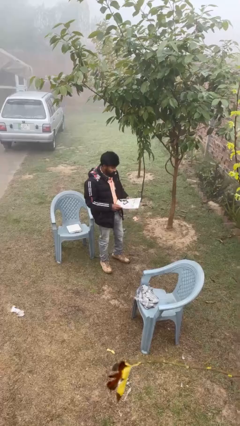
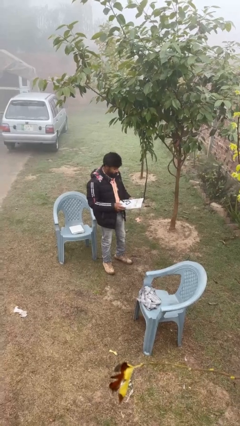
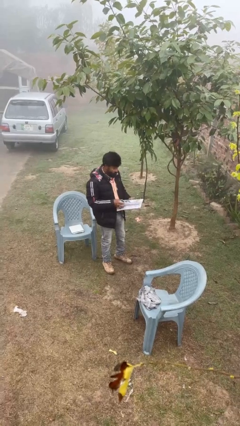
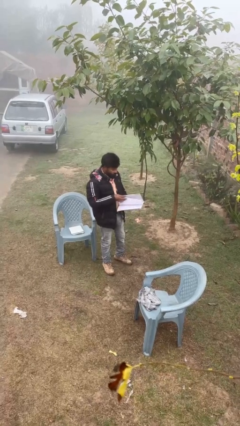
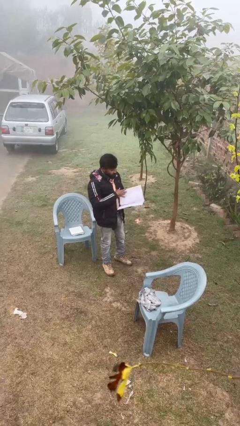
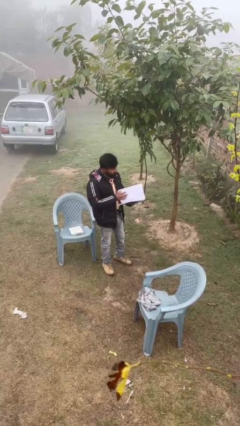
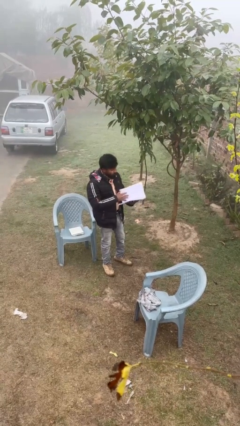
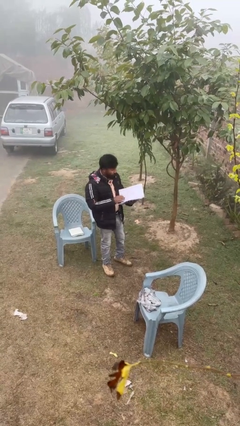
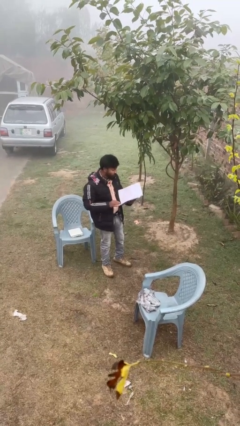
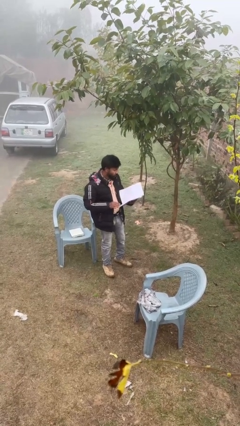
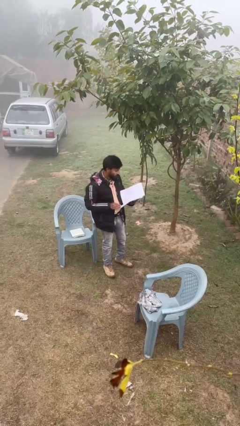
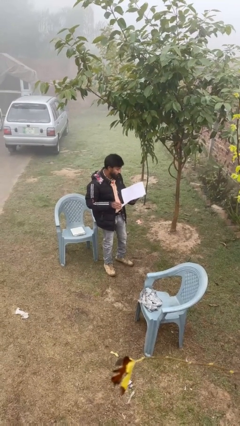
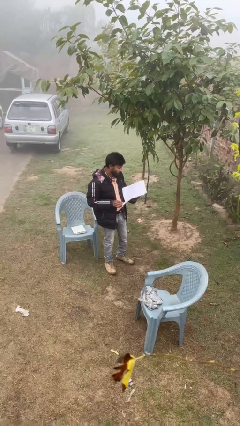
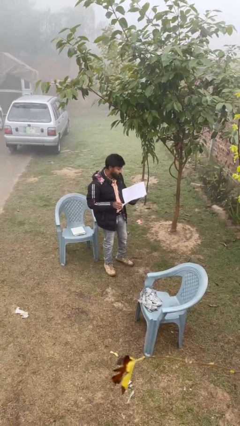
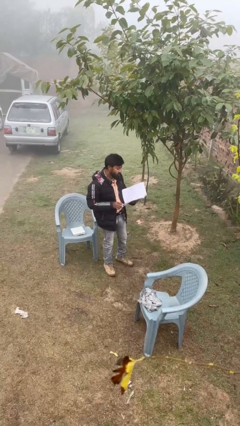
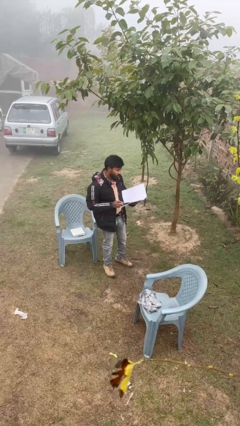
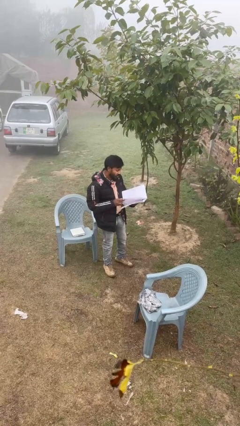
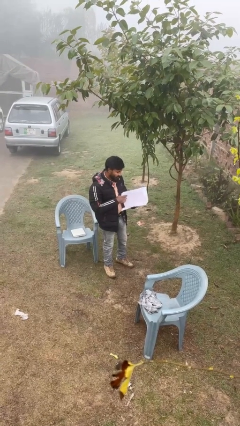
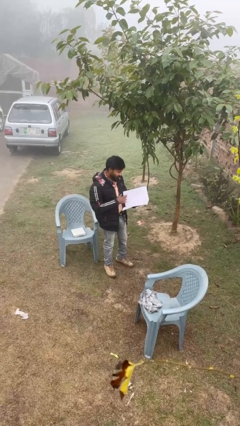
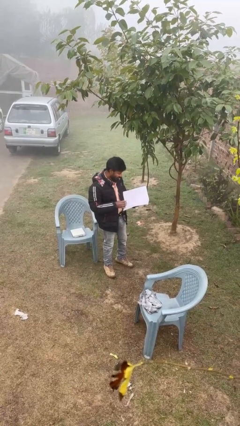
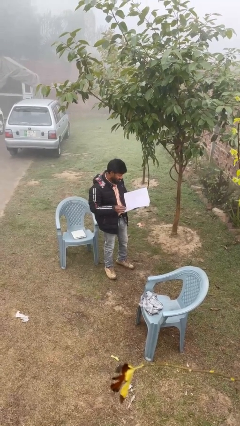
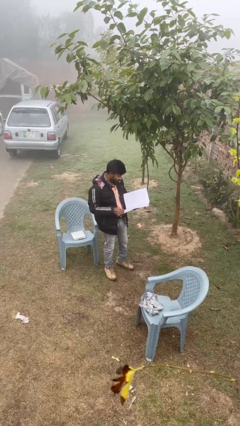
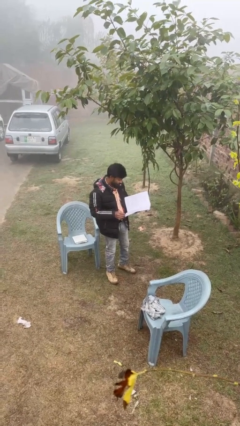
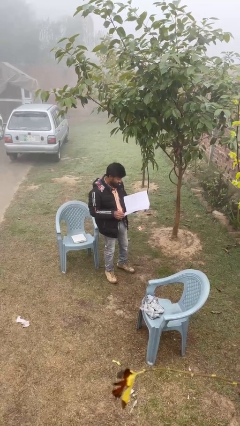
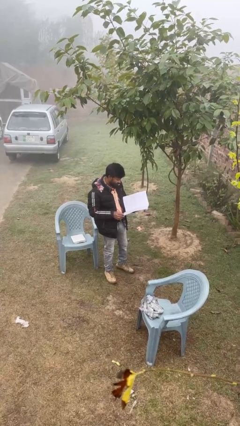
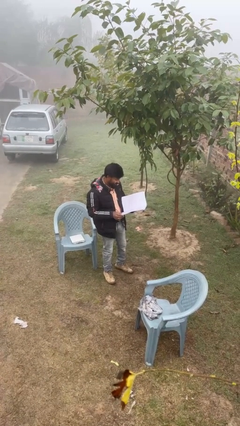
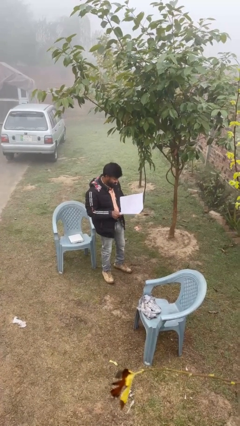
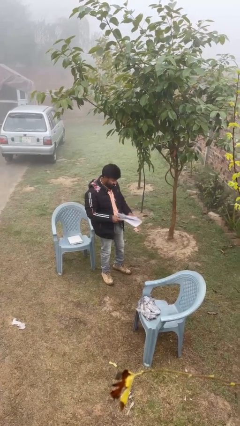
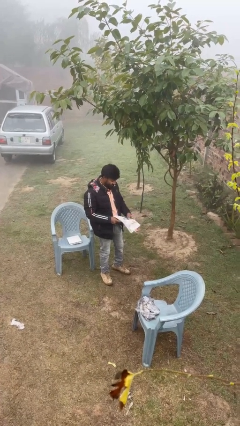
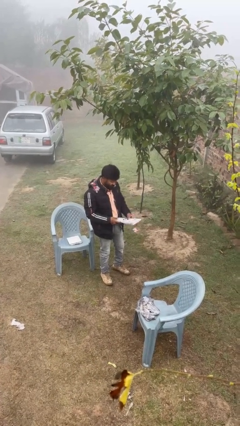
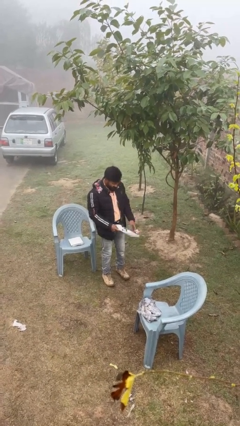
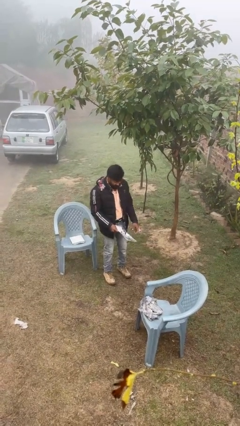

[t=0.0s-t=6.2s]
person reads document

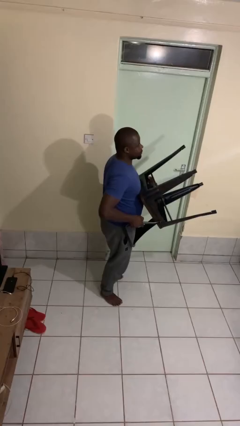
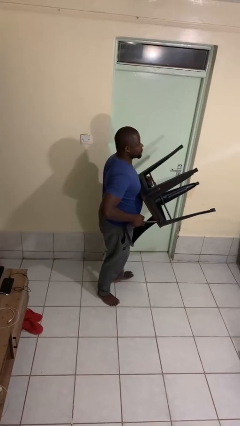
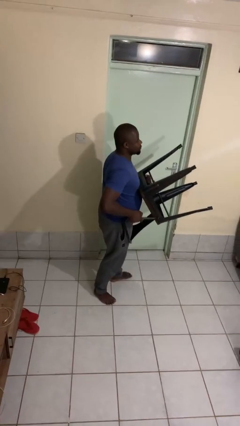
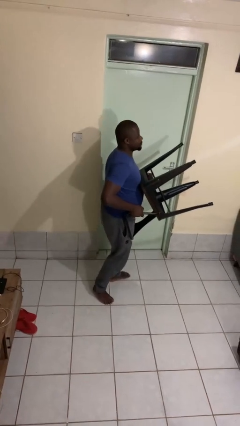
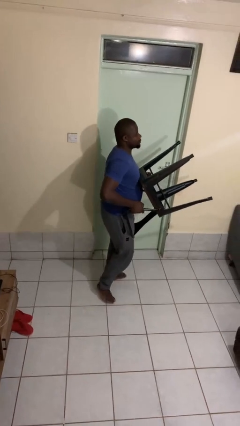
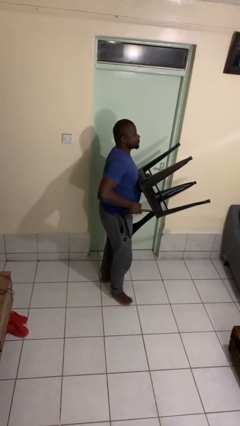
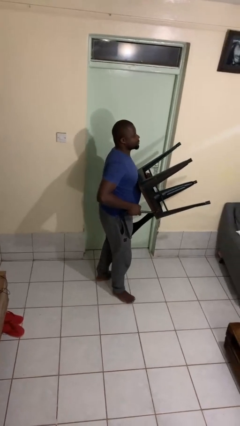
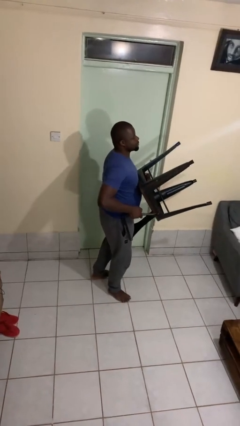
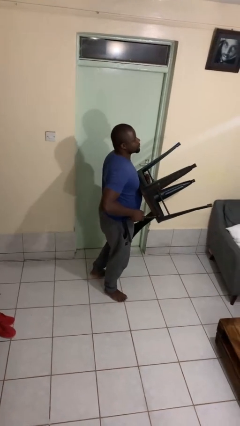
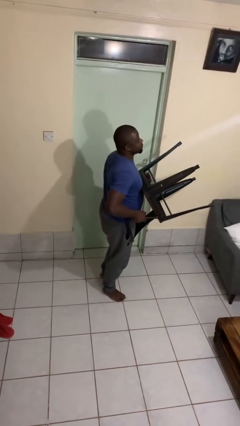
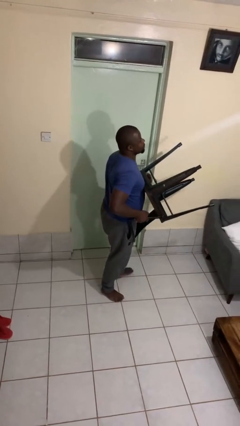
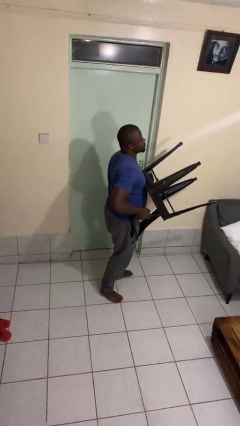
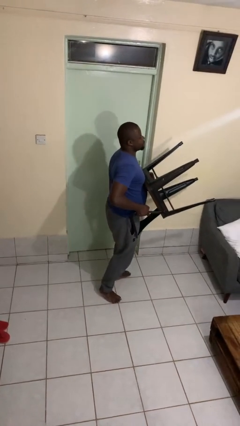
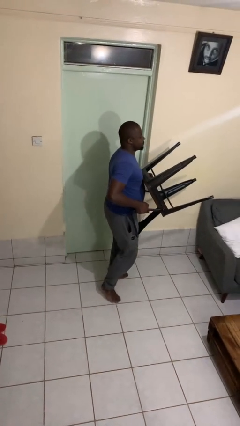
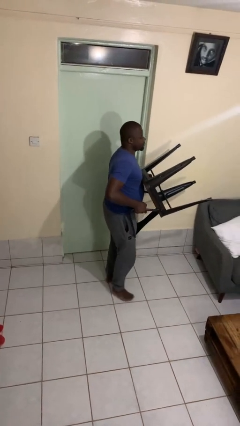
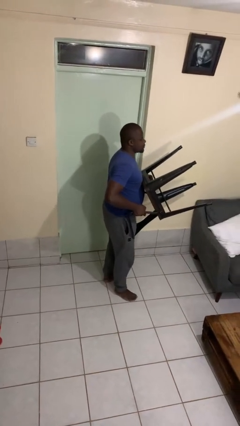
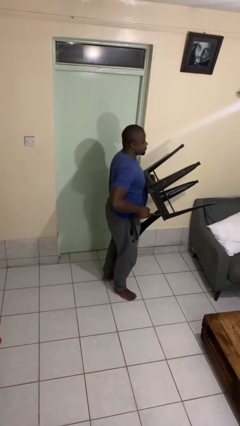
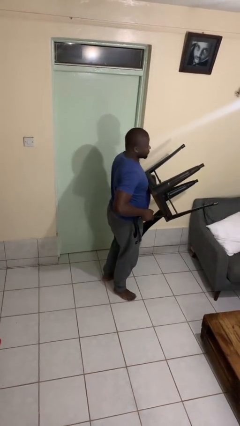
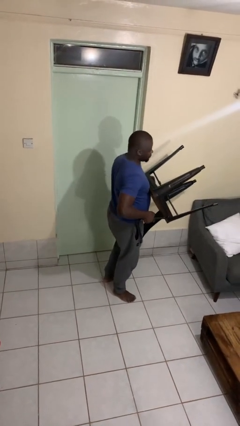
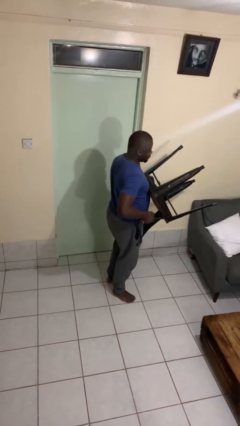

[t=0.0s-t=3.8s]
person carries furniture

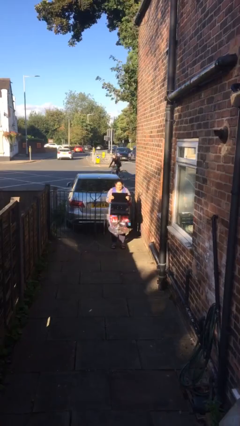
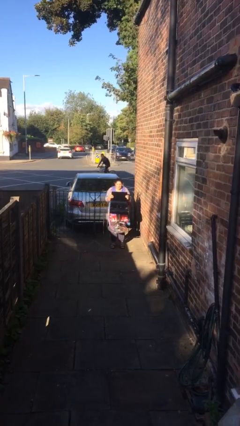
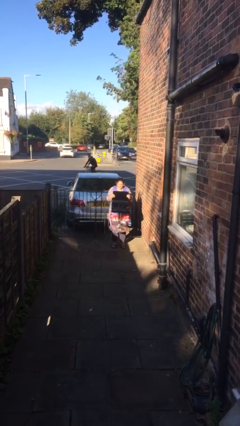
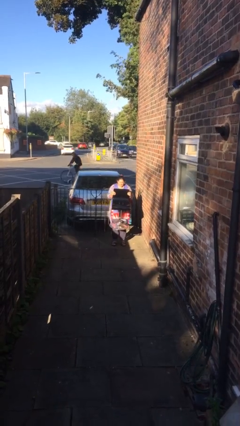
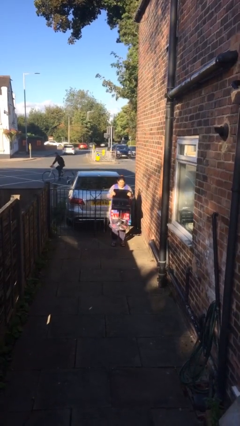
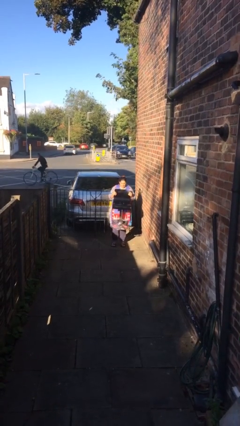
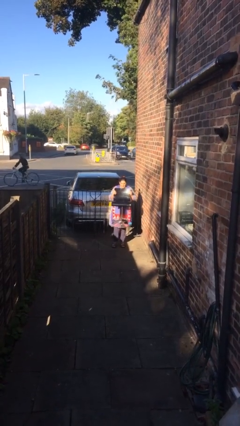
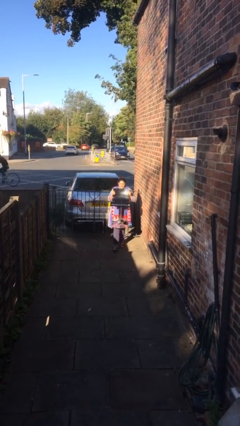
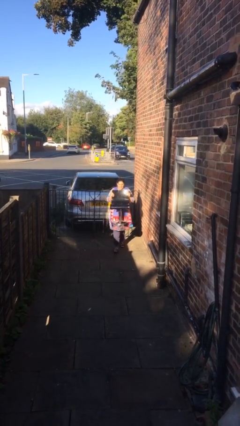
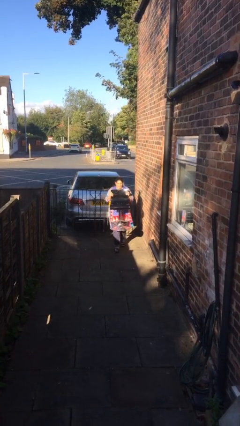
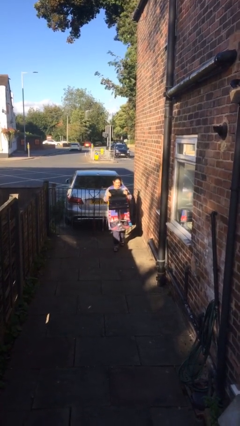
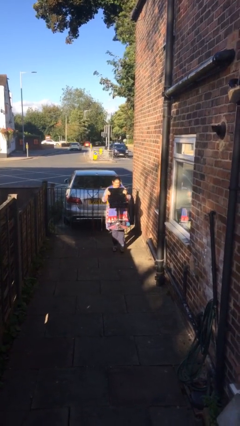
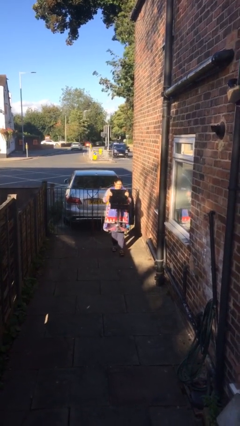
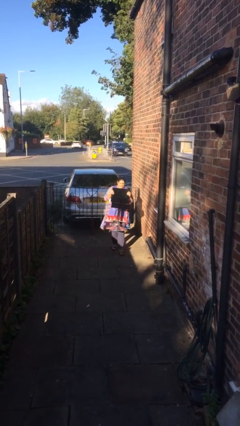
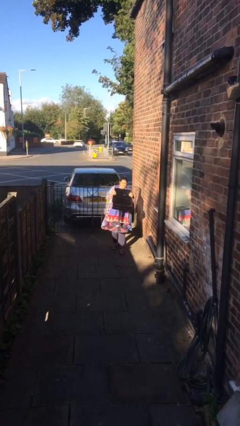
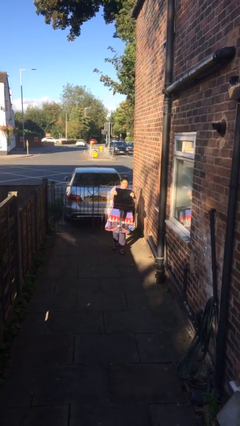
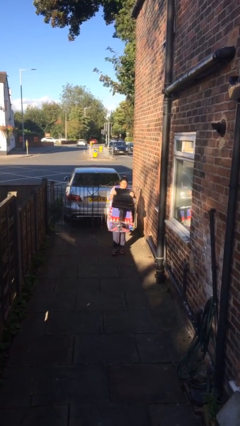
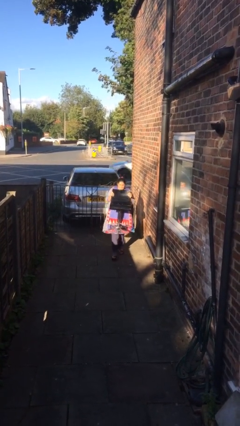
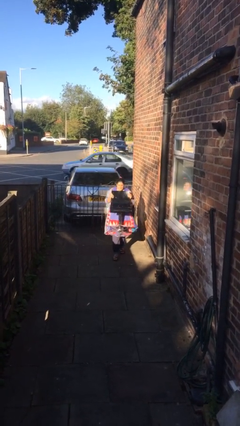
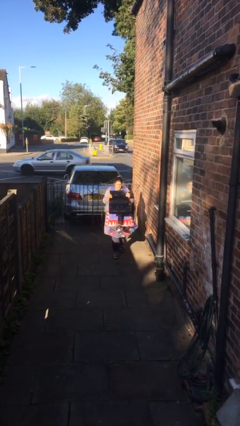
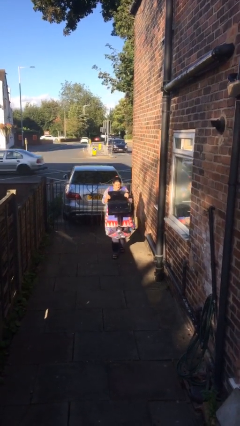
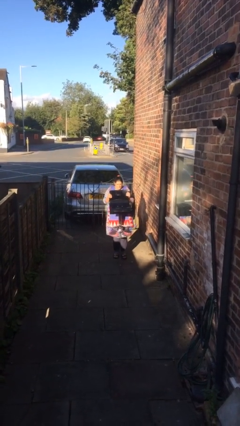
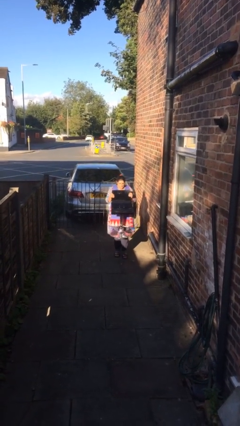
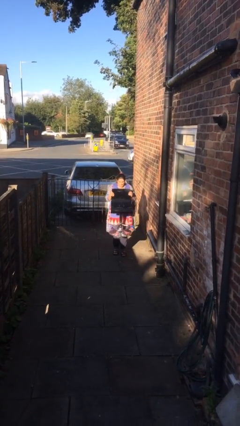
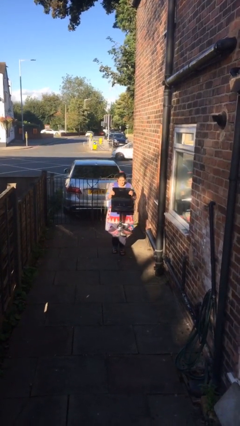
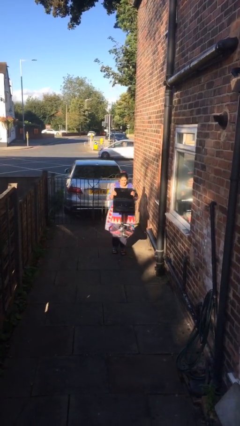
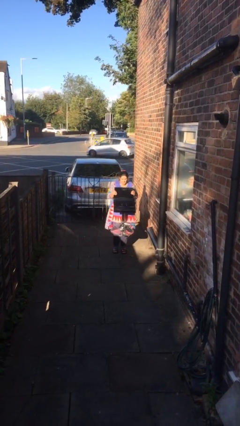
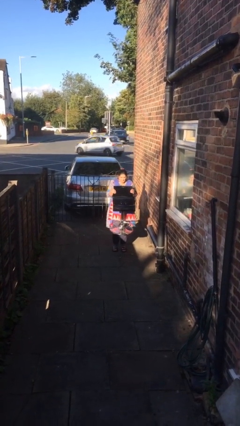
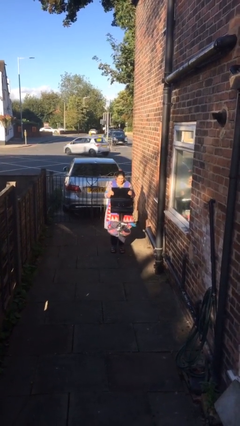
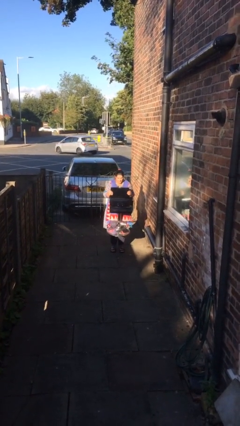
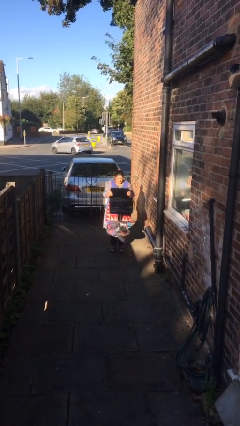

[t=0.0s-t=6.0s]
person carries heavy object

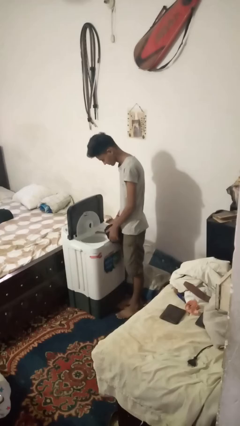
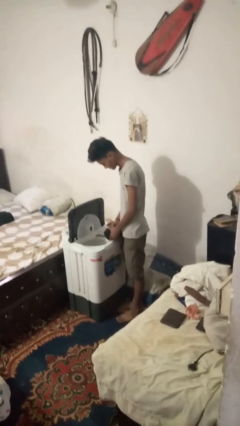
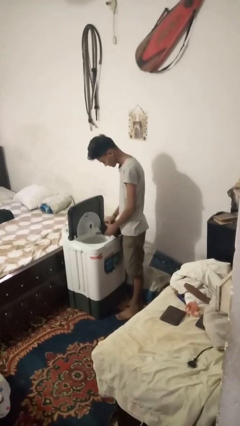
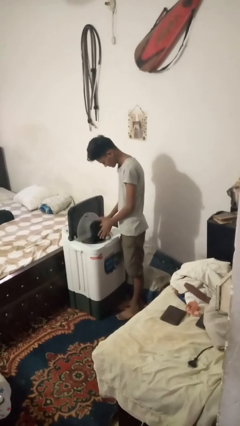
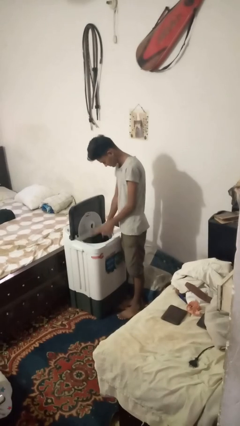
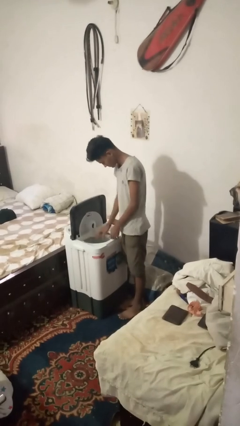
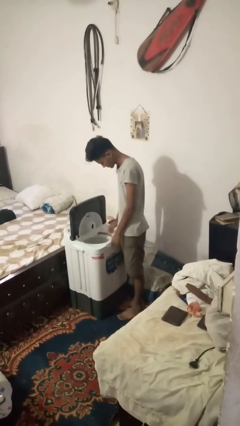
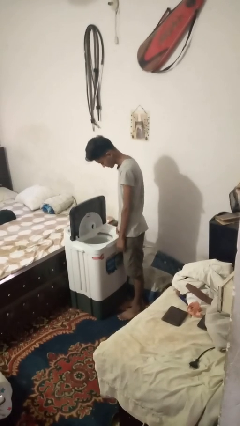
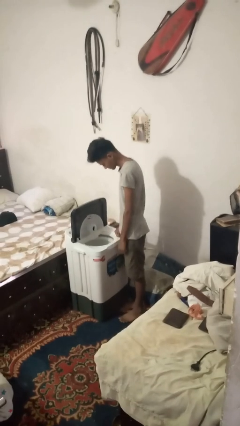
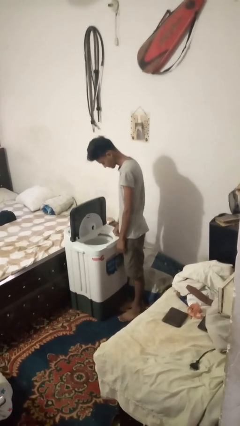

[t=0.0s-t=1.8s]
person loads clotheswasher
